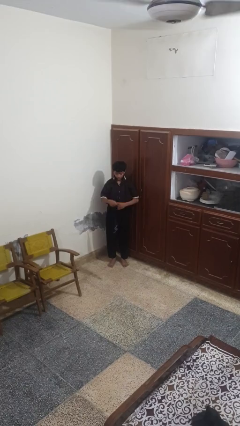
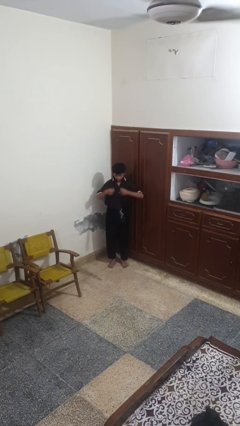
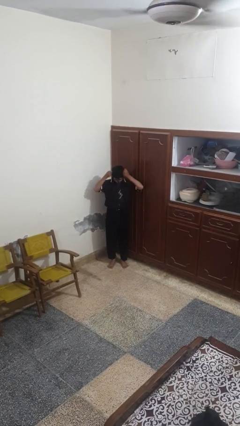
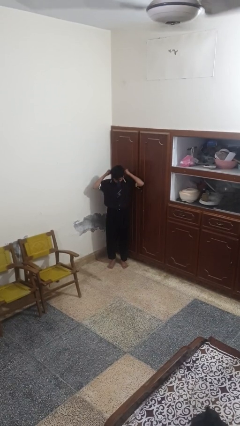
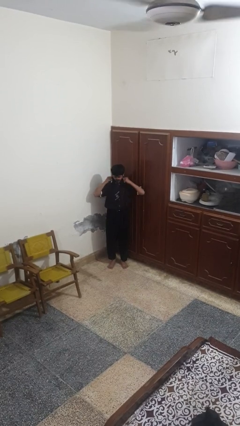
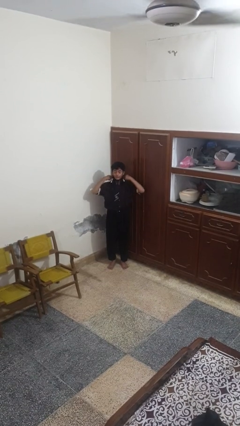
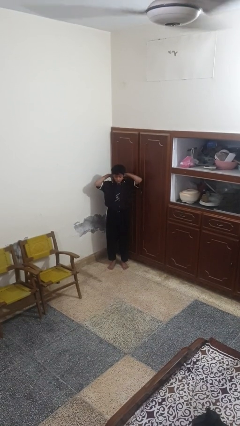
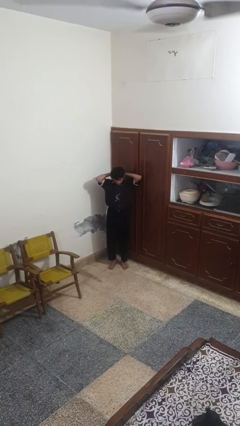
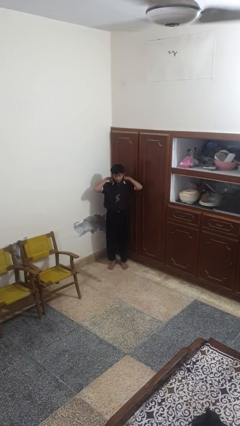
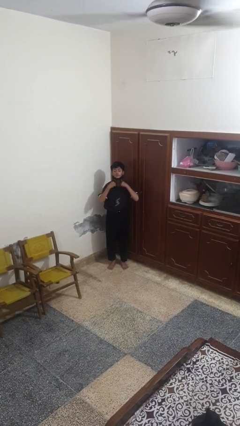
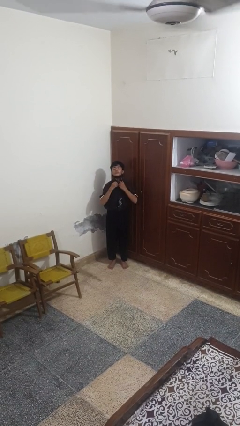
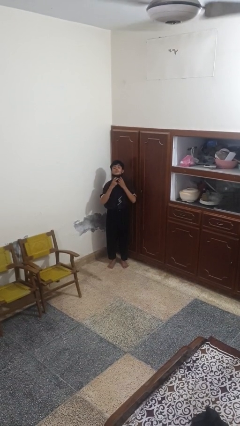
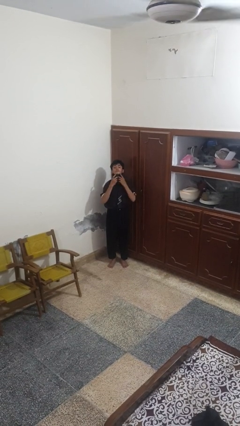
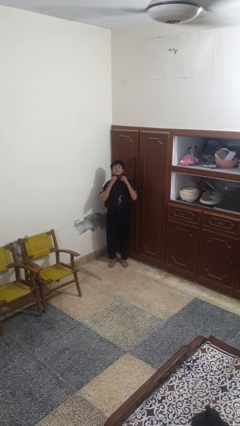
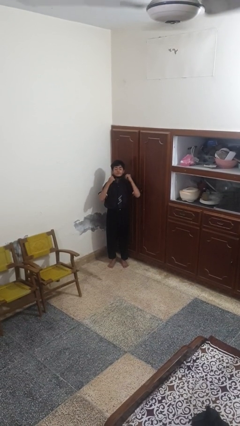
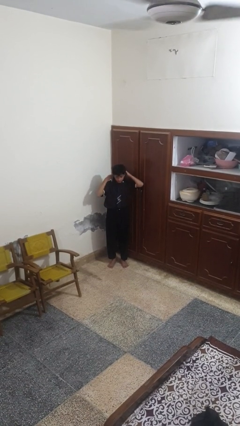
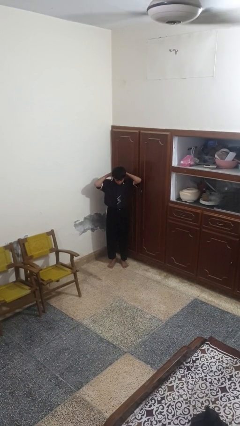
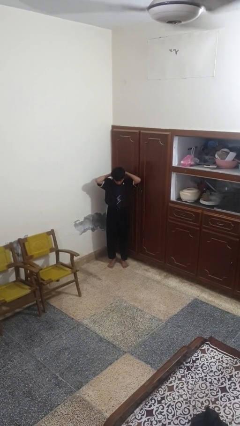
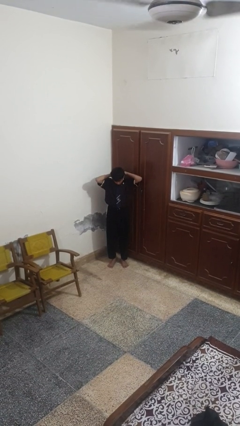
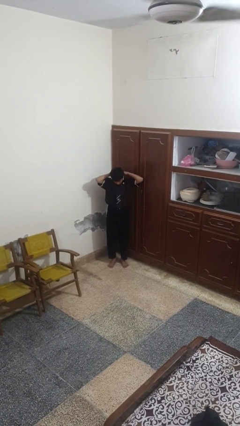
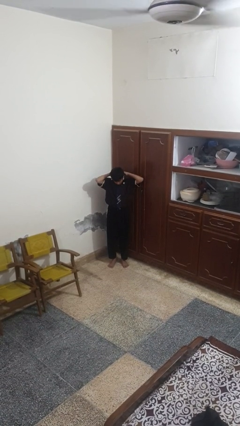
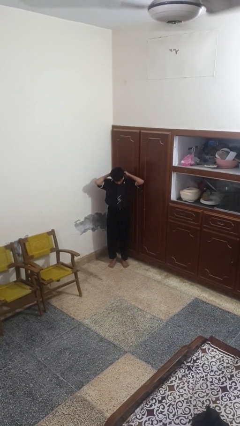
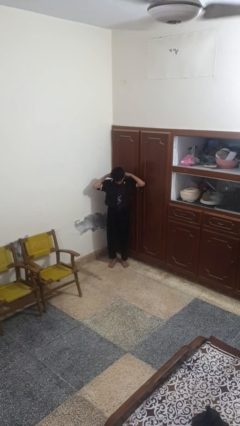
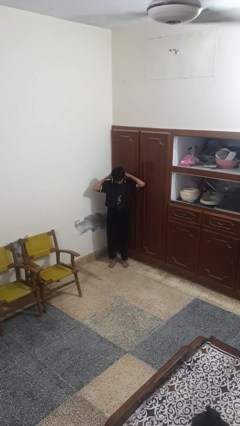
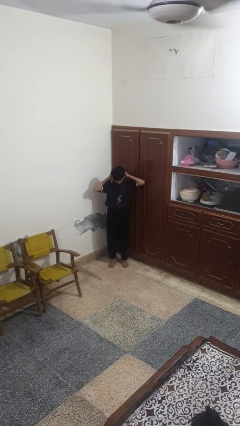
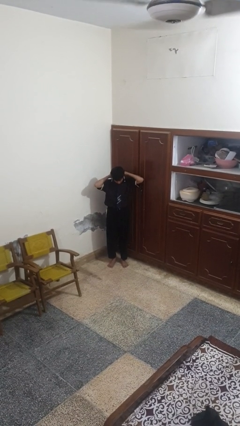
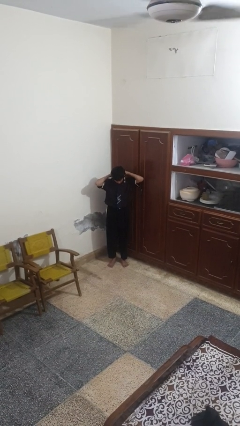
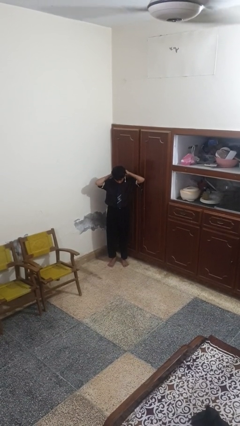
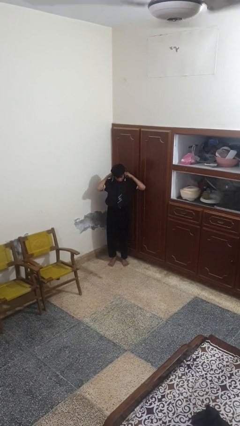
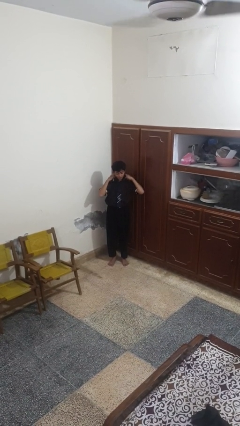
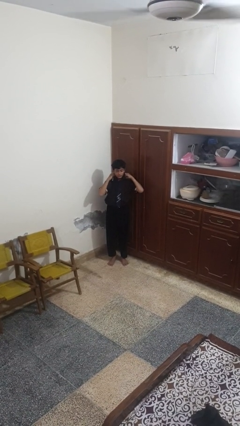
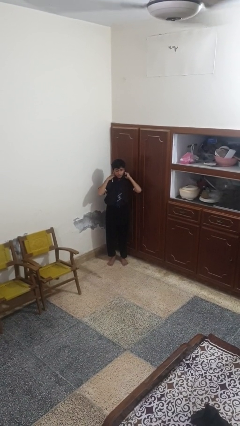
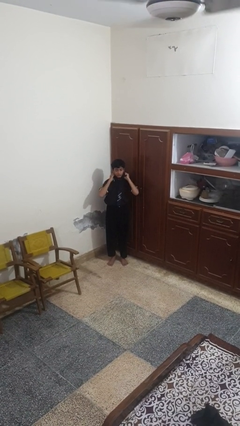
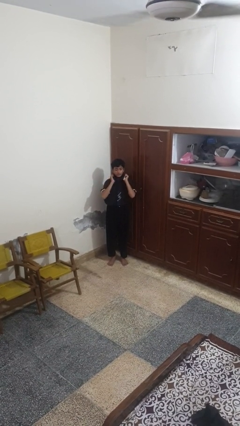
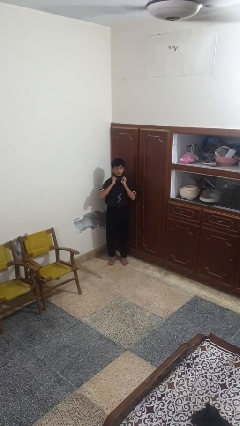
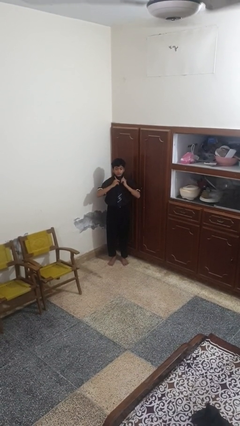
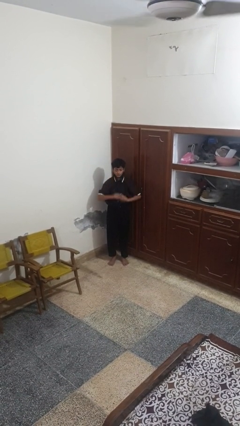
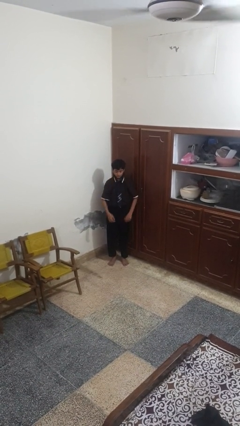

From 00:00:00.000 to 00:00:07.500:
person puts on necktie

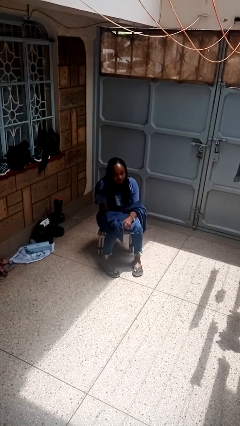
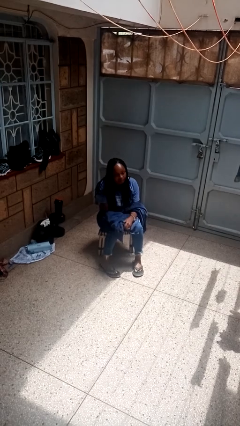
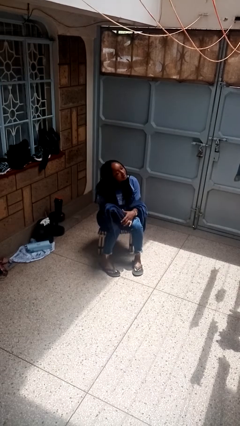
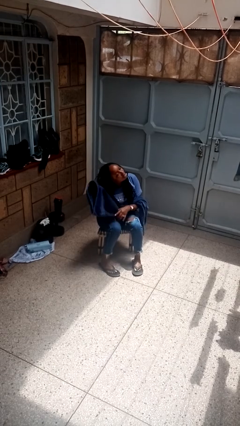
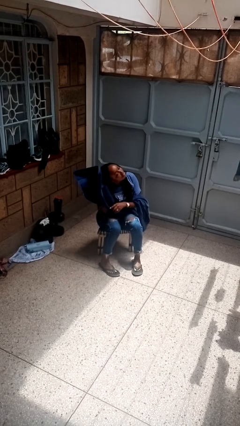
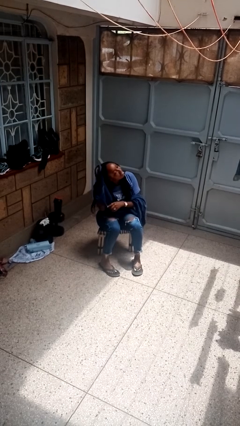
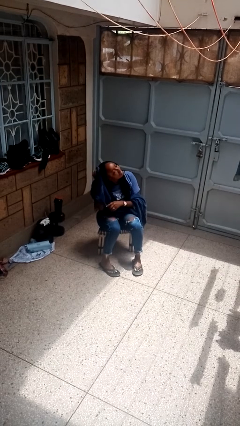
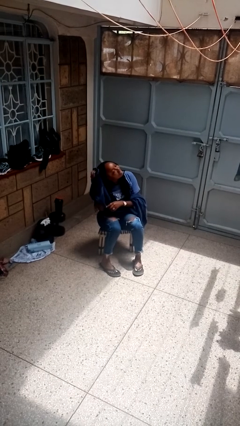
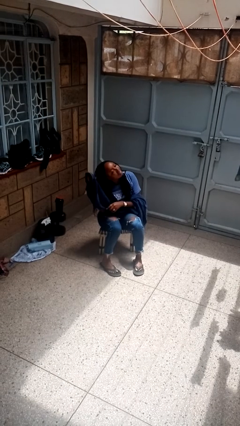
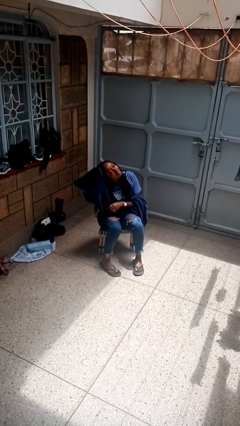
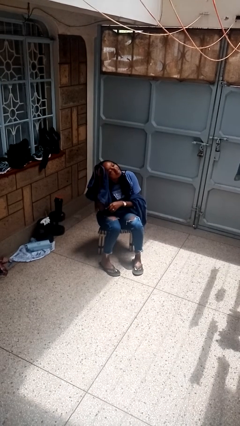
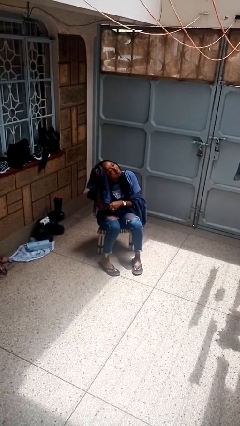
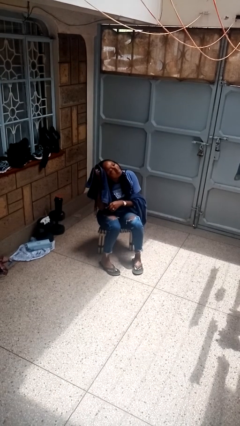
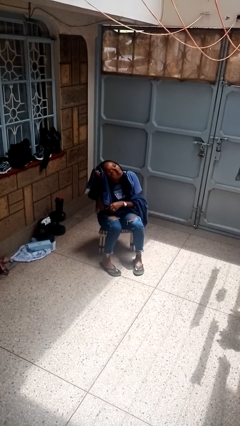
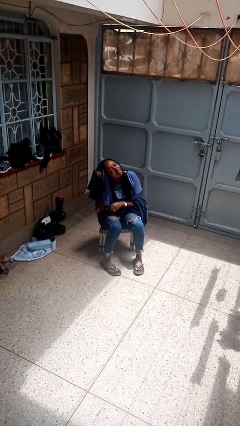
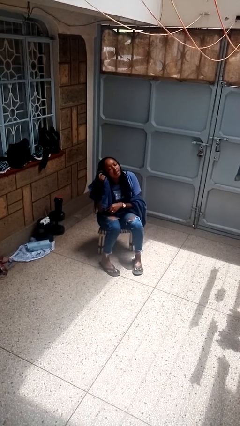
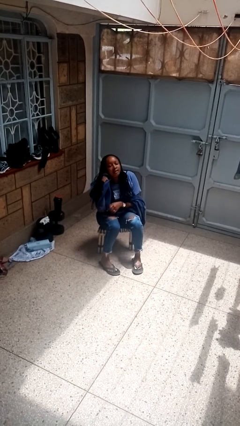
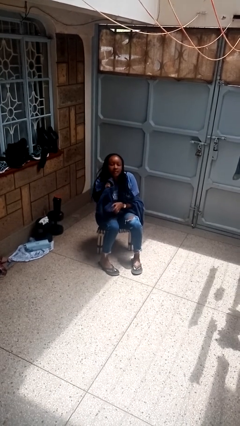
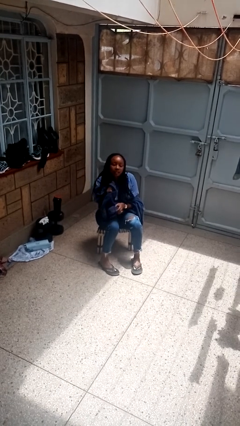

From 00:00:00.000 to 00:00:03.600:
person dries hair with towel

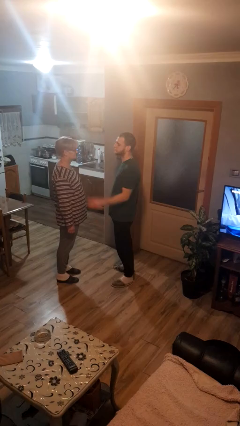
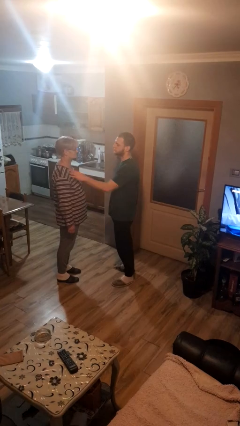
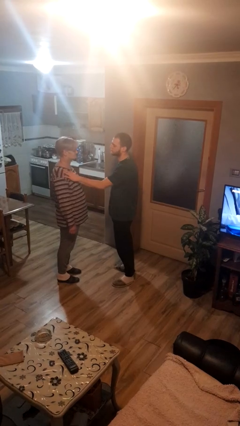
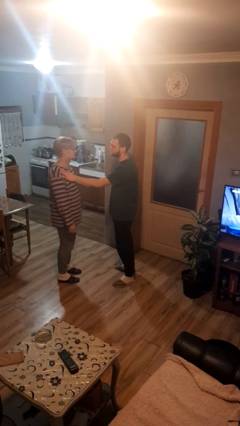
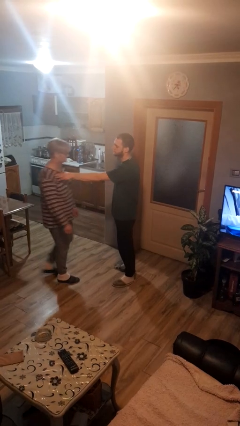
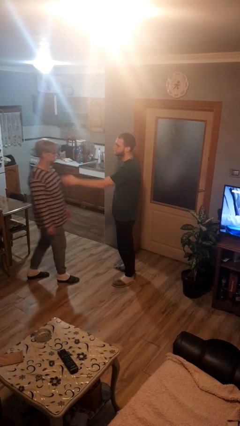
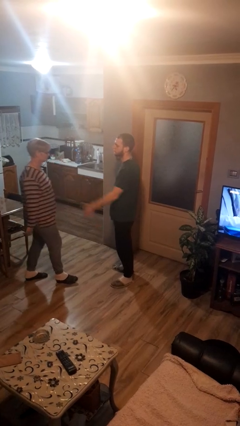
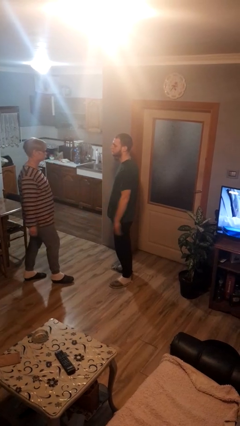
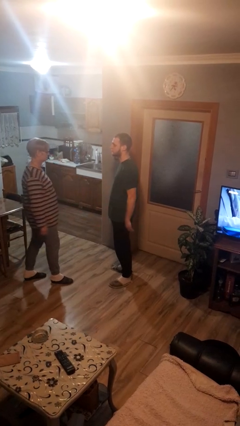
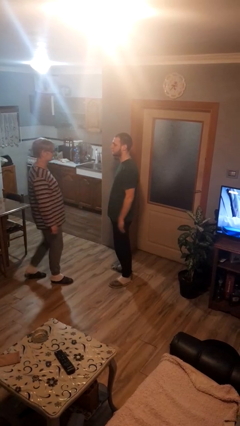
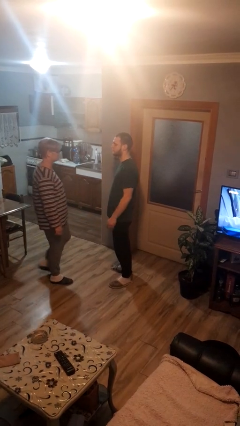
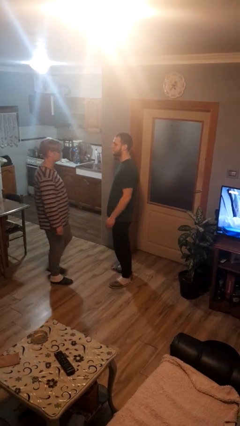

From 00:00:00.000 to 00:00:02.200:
person shoves person

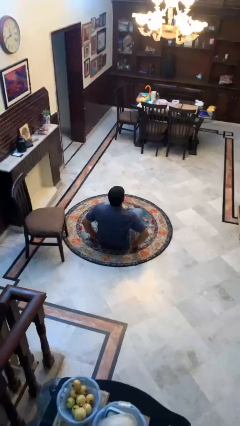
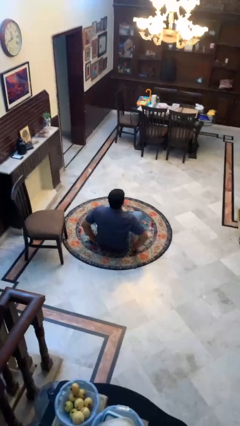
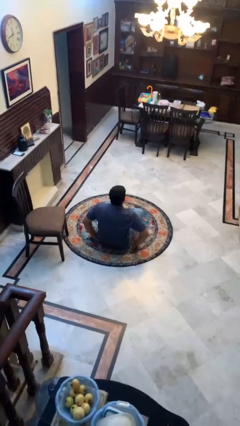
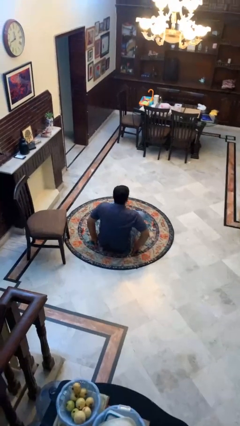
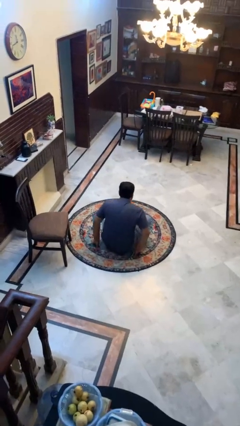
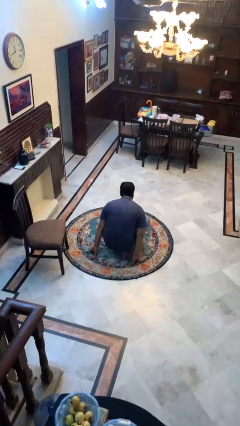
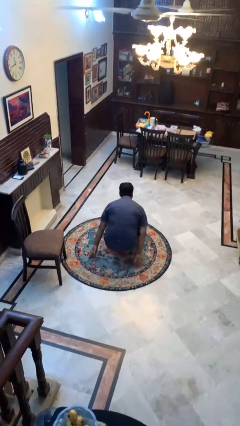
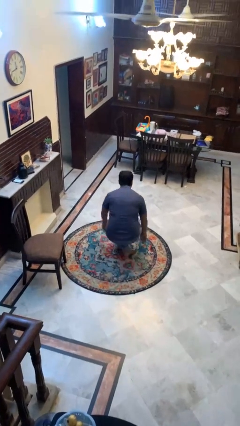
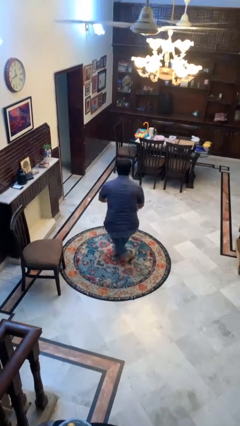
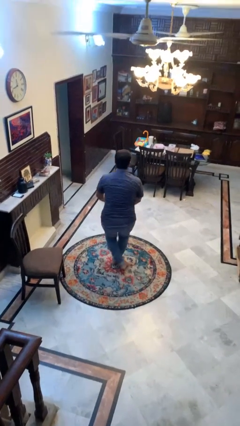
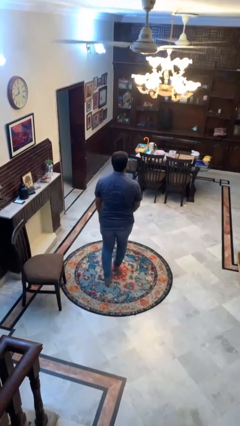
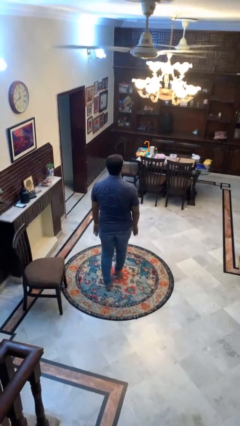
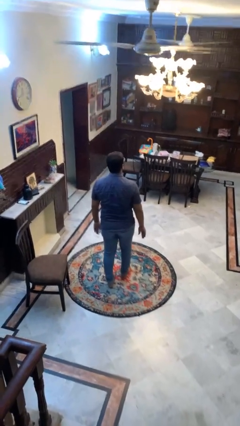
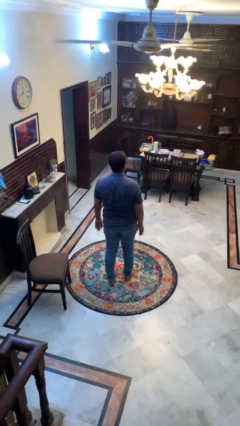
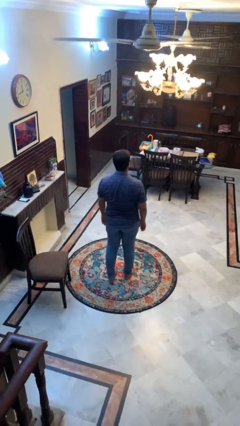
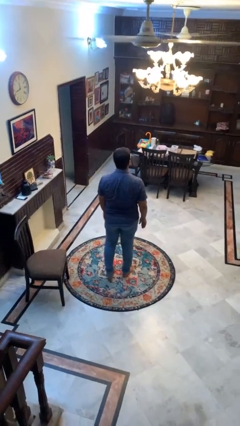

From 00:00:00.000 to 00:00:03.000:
person stands up from floor

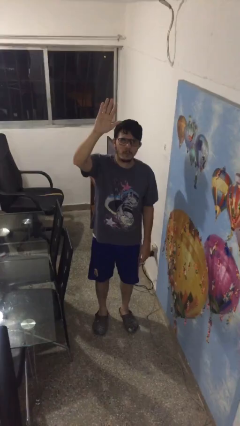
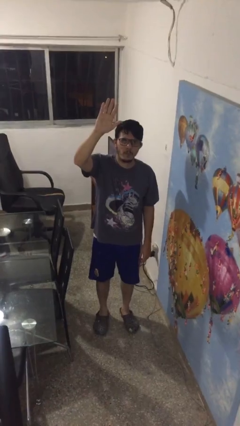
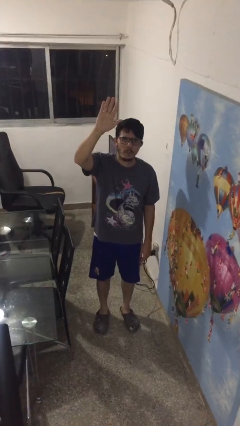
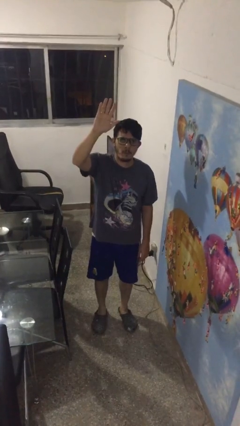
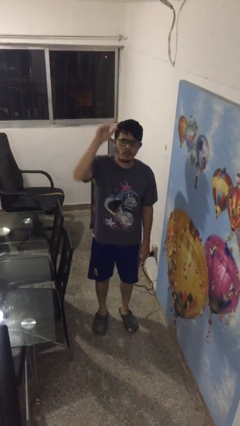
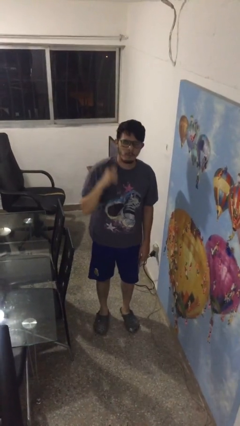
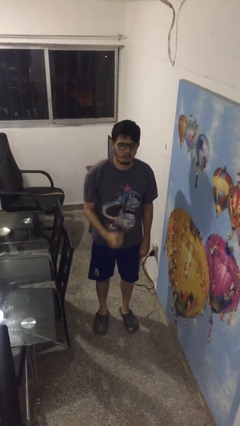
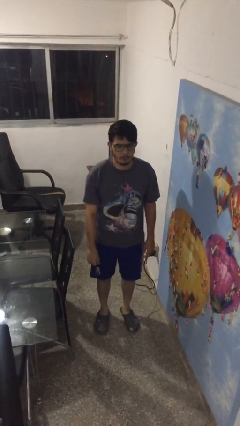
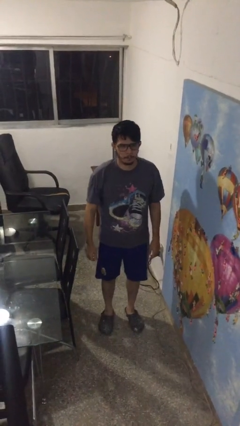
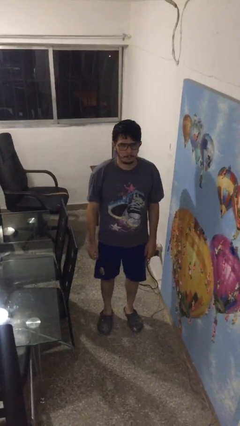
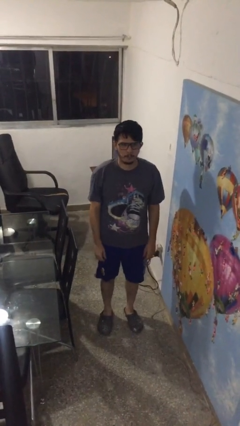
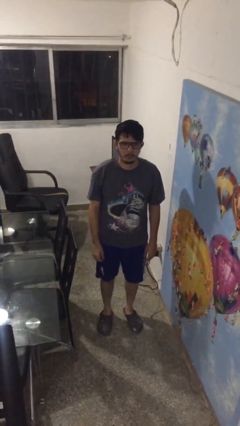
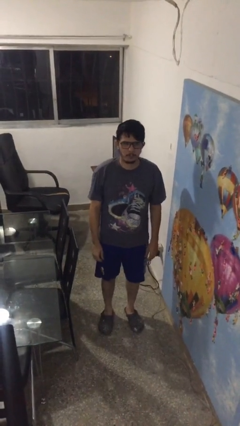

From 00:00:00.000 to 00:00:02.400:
person gestures lower hand
